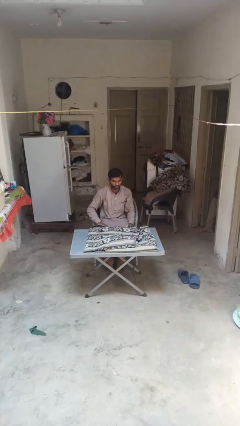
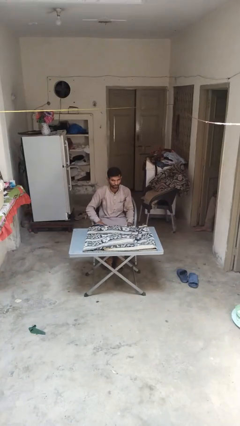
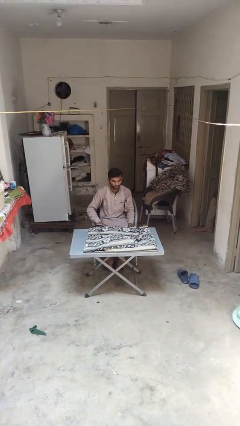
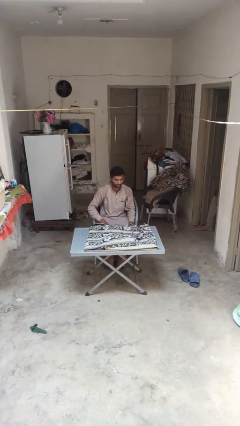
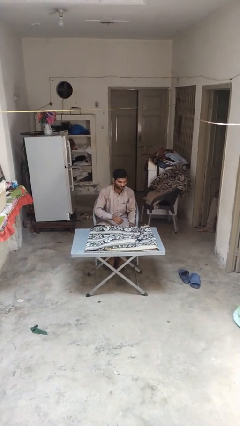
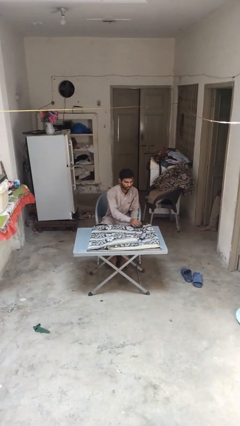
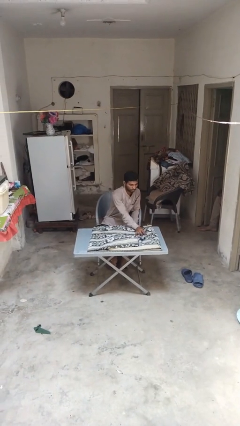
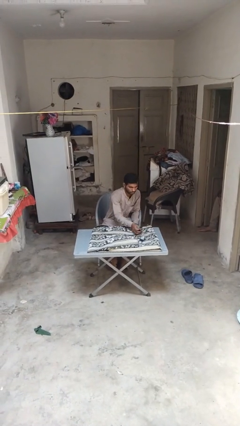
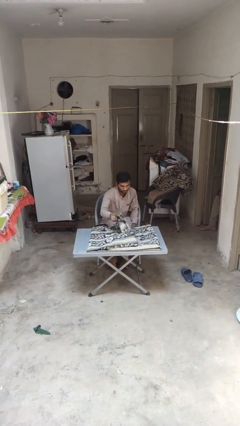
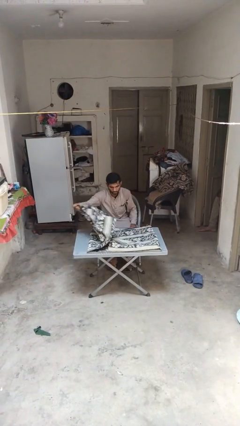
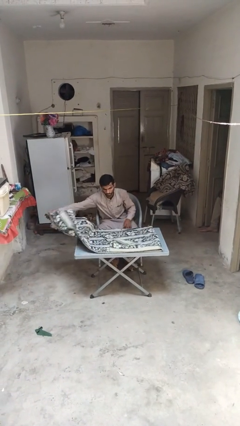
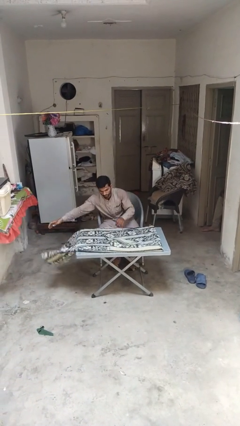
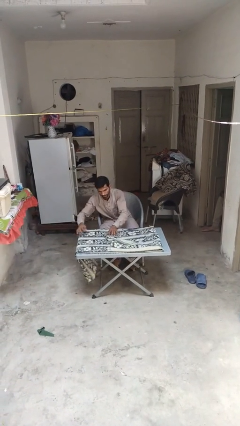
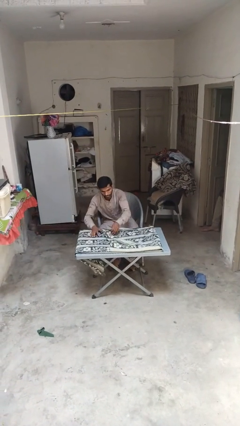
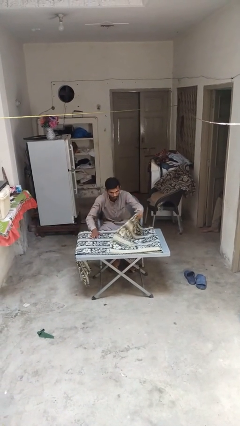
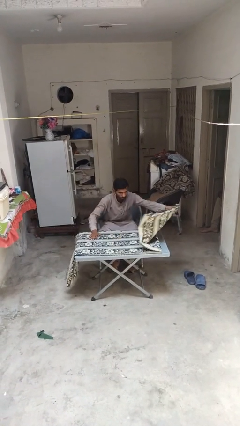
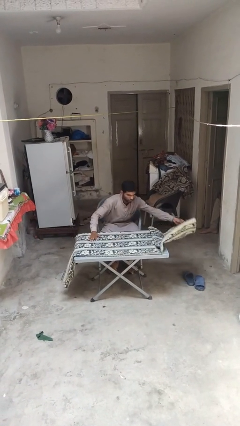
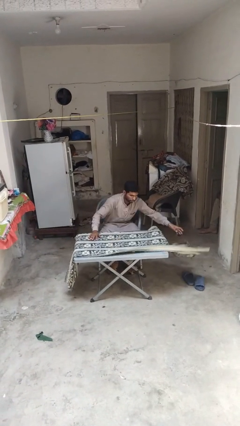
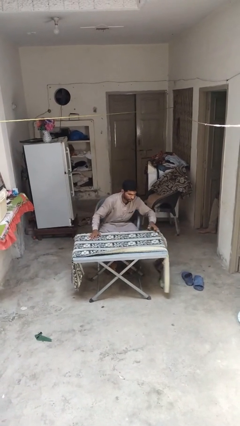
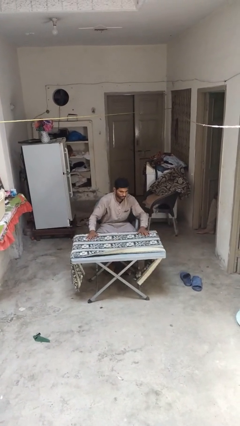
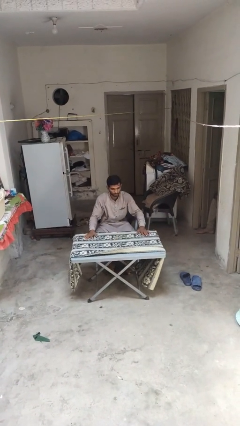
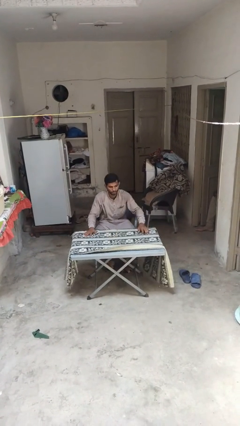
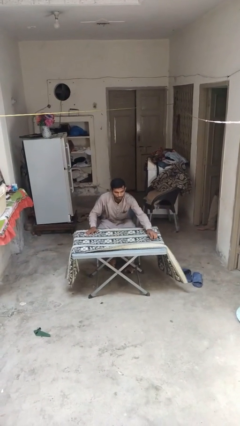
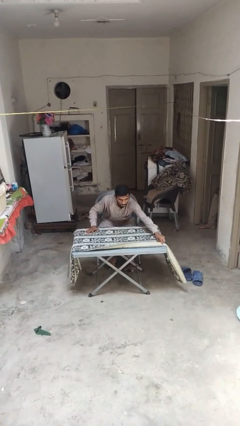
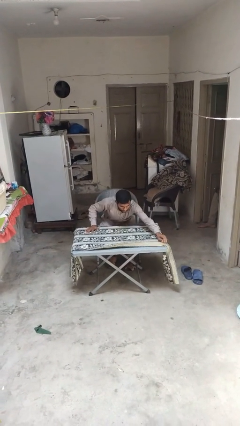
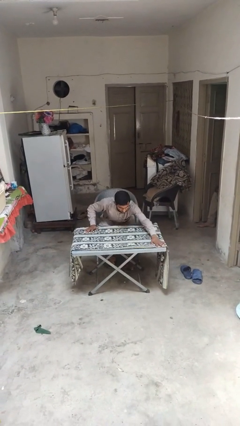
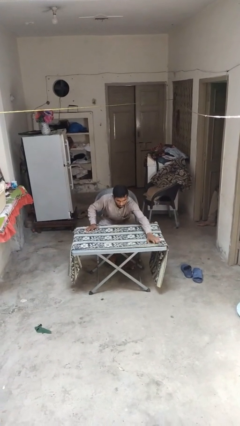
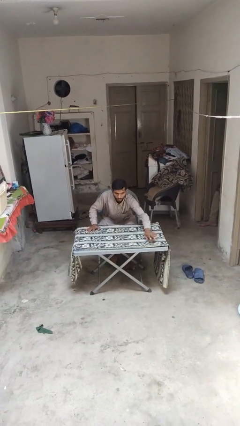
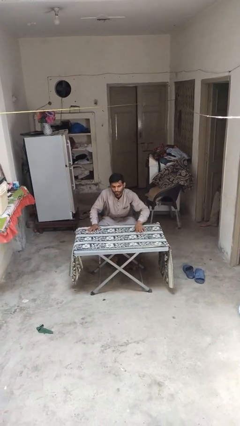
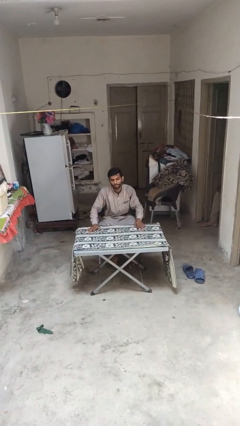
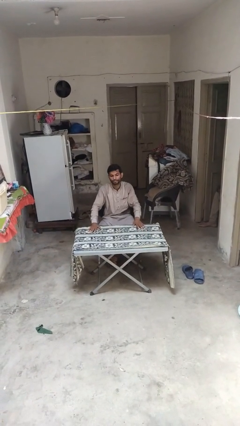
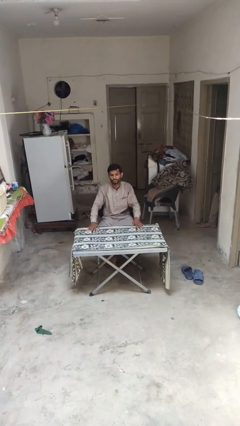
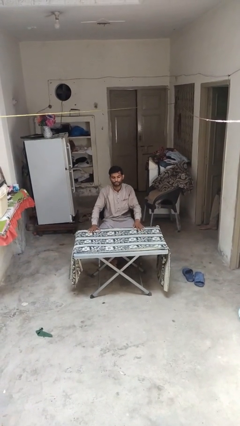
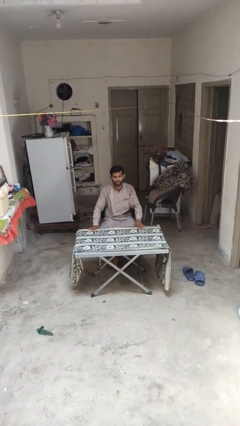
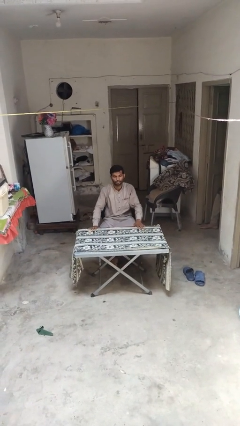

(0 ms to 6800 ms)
person spreads tablecloth

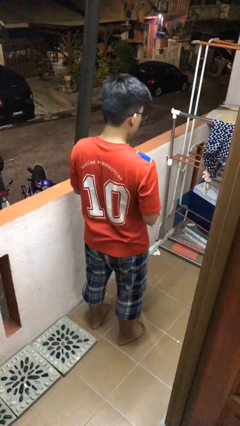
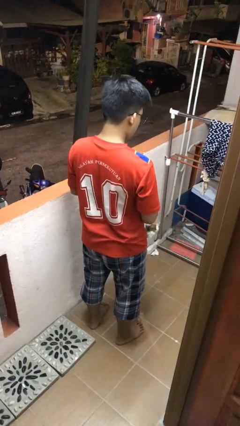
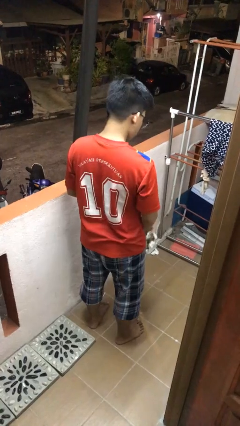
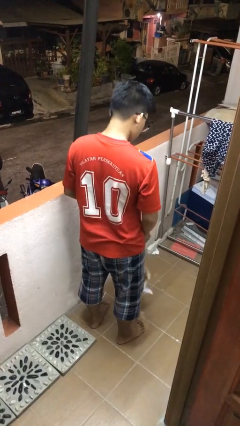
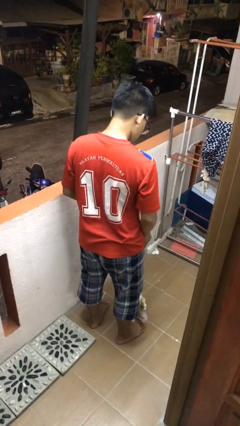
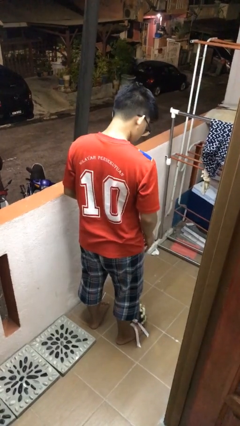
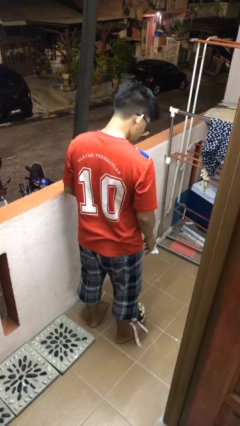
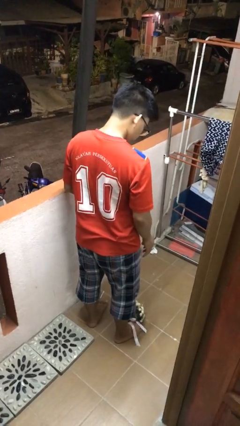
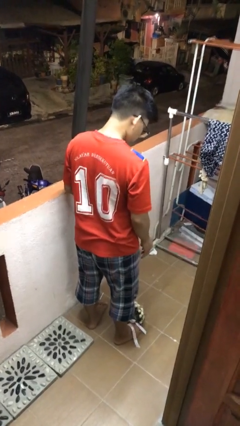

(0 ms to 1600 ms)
person drops object

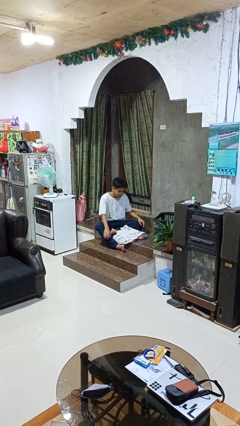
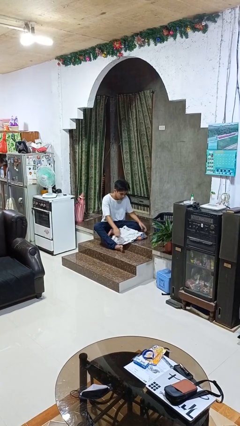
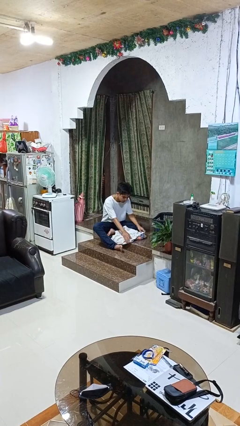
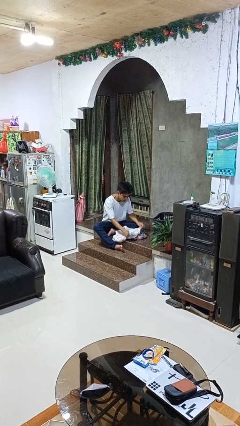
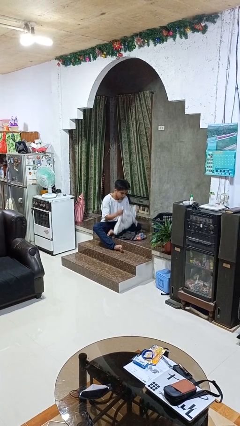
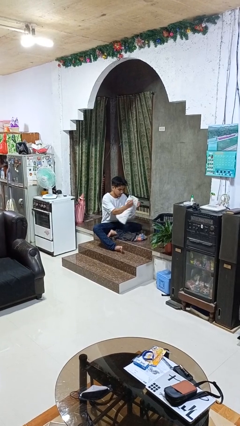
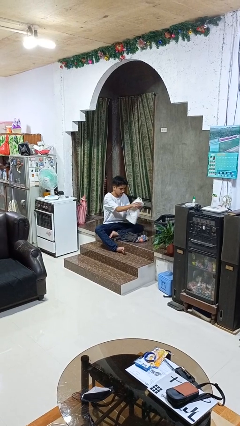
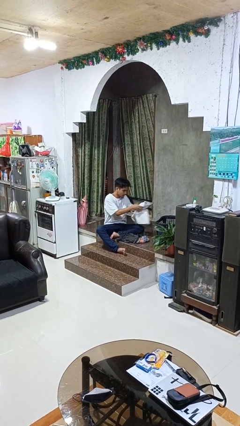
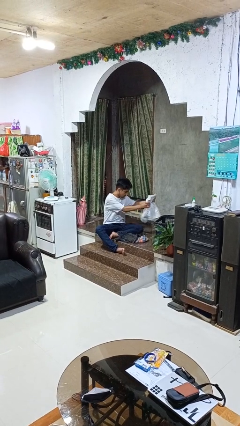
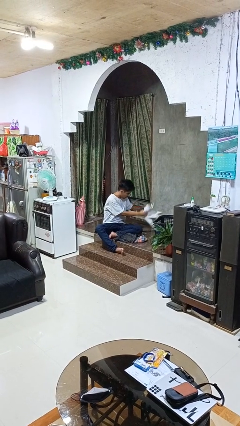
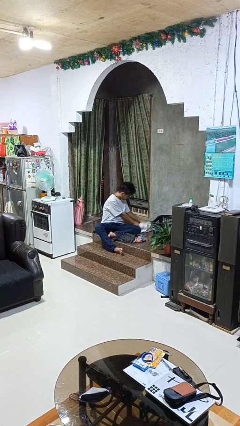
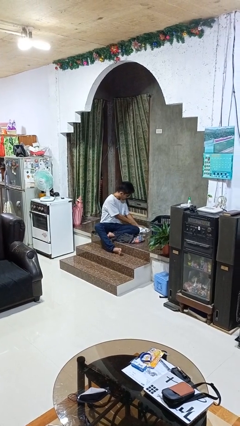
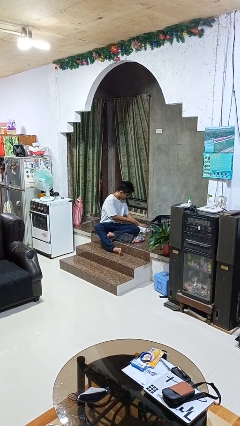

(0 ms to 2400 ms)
person folds pants

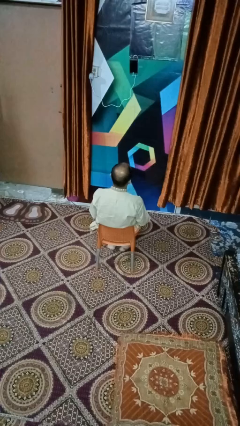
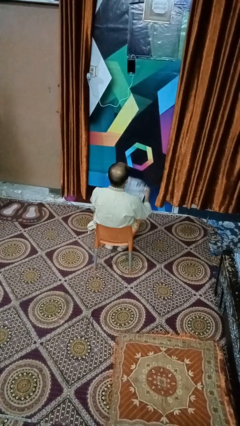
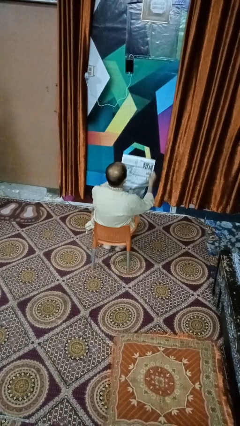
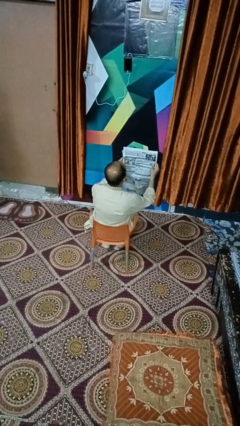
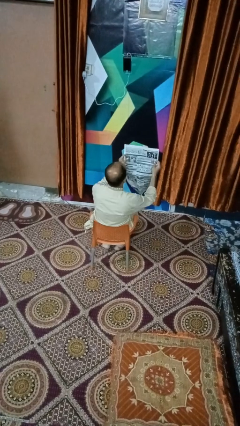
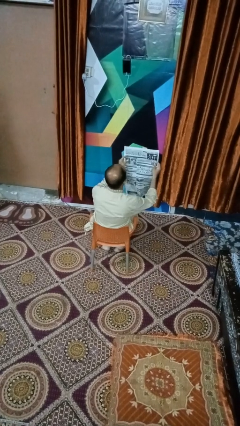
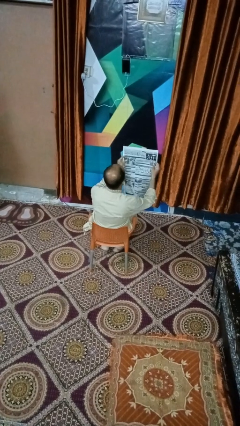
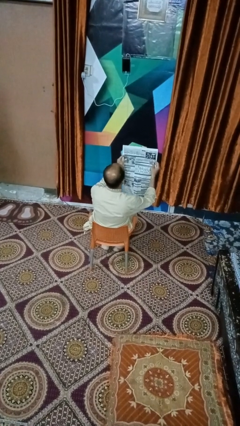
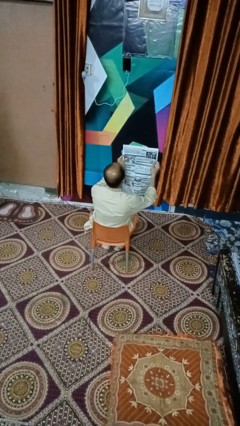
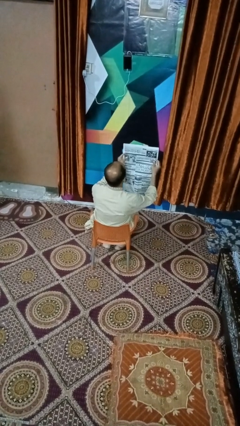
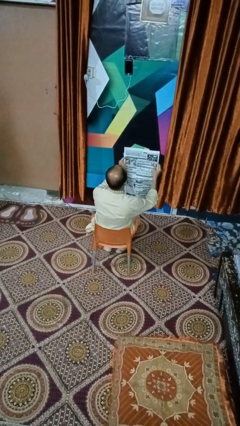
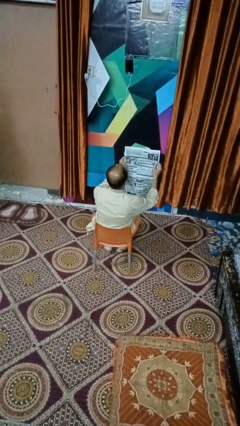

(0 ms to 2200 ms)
person reads newspaper

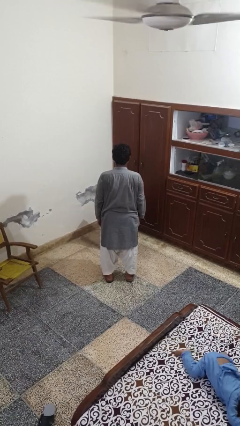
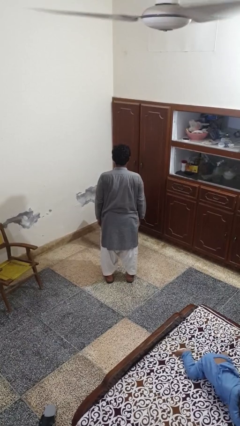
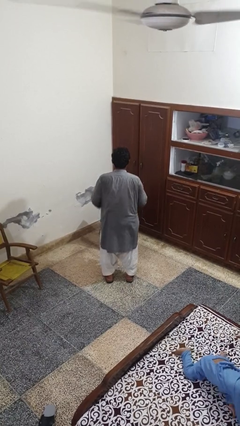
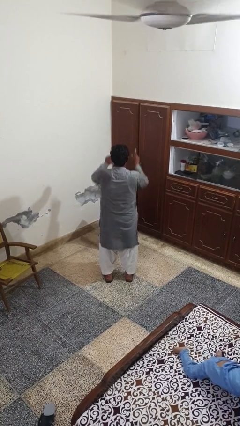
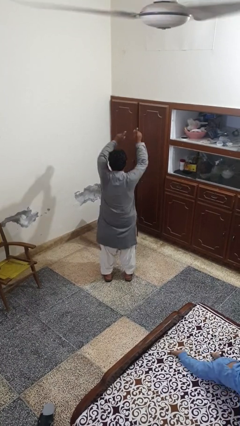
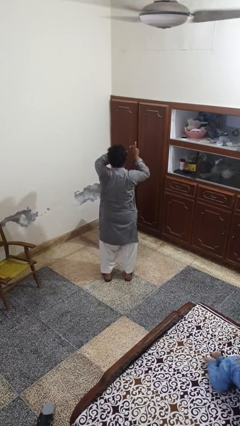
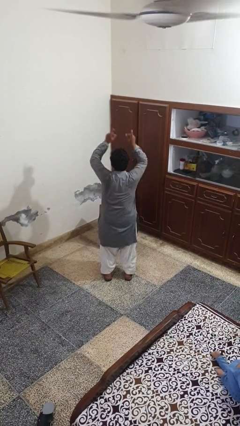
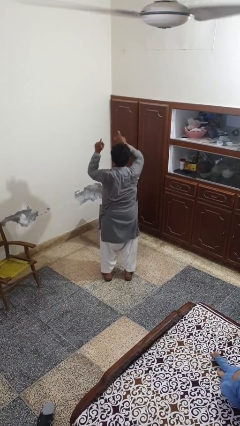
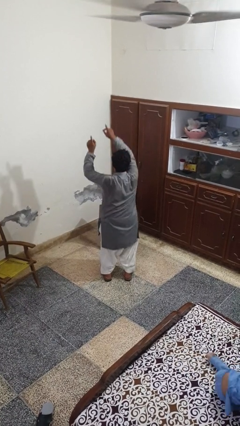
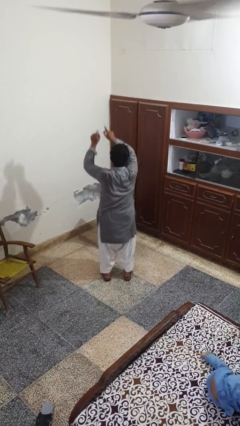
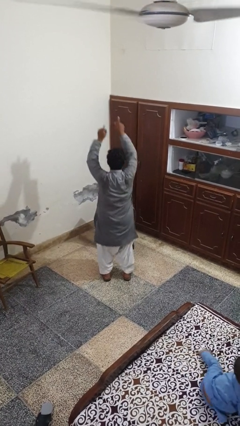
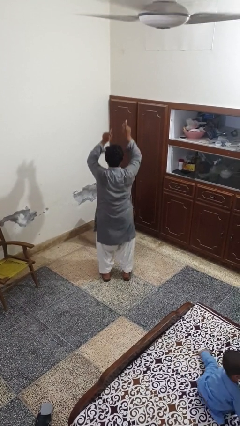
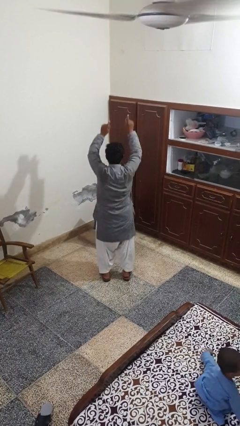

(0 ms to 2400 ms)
person dances in place

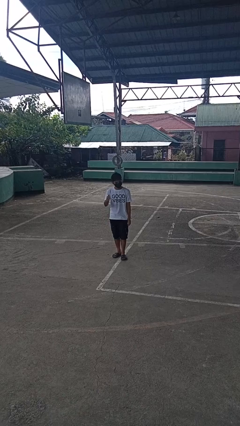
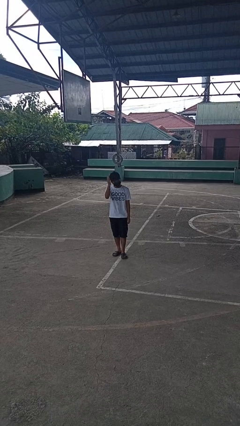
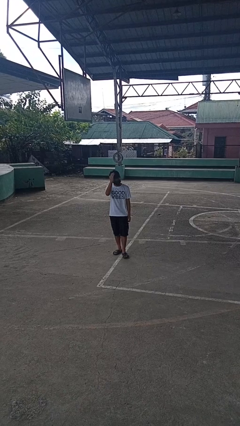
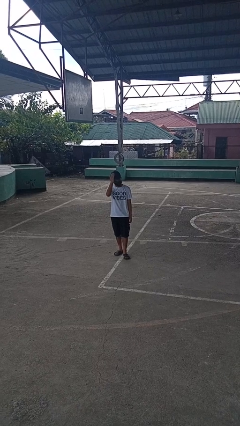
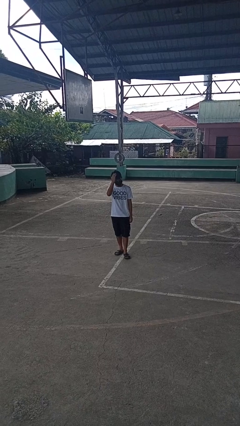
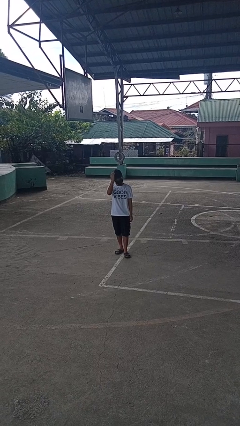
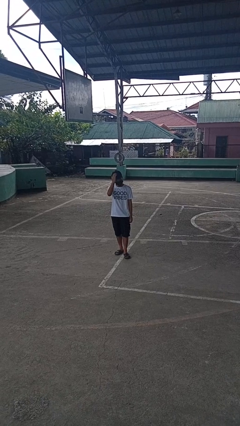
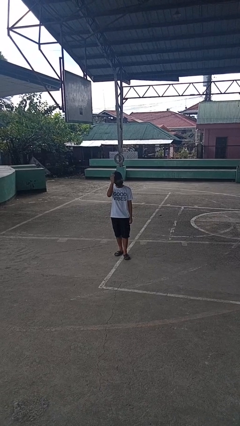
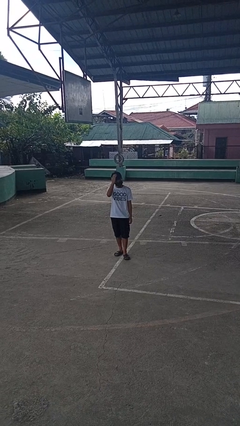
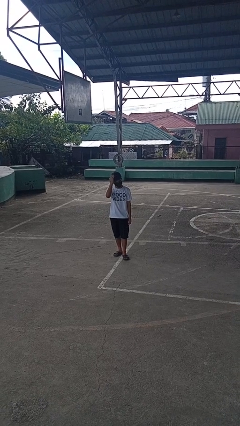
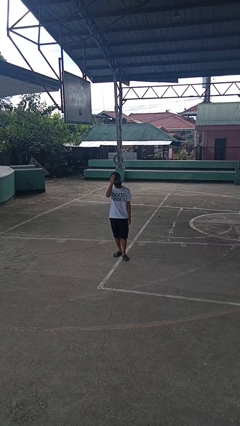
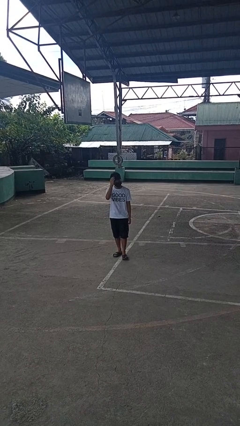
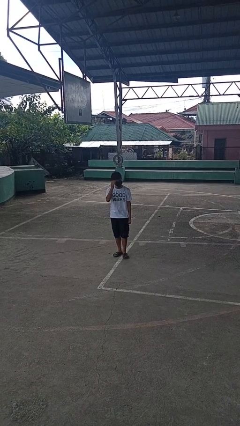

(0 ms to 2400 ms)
person pats head
